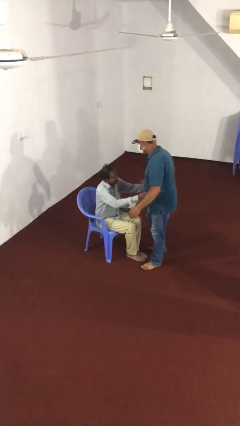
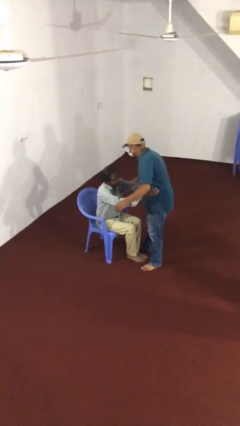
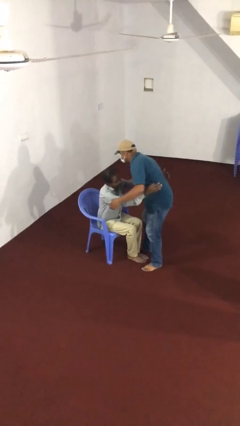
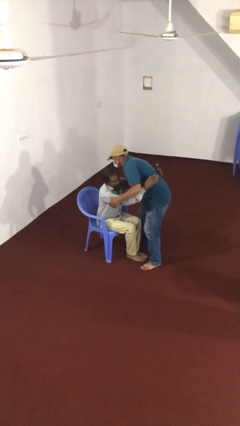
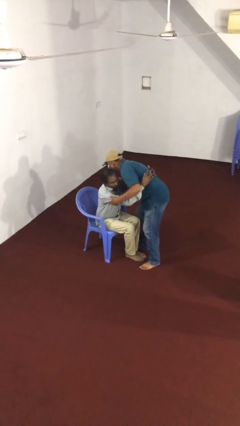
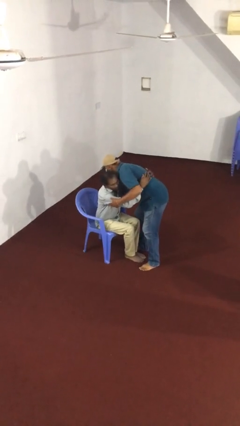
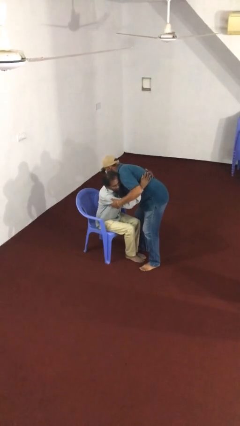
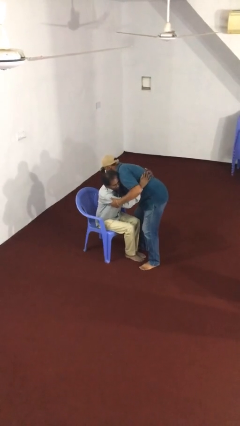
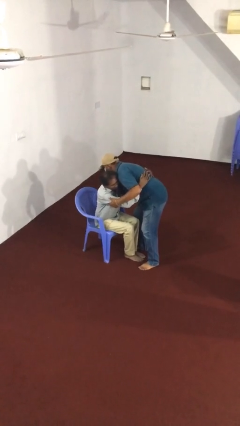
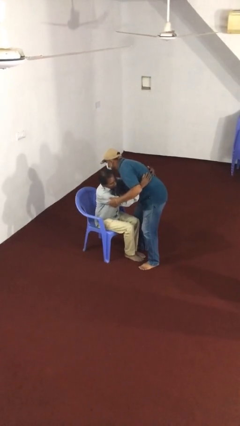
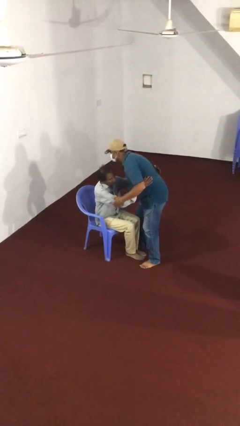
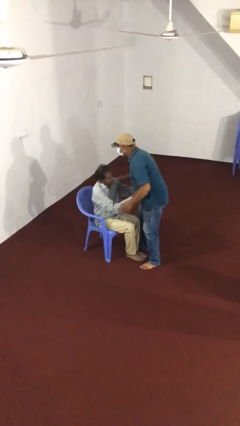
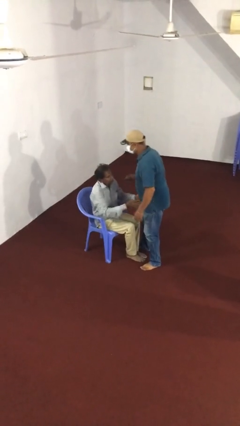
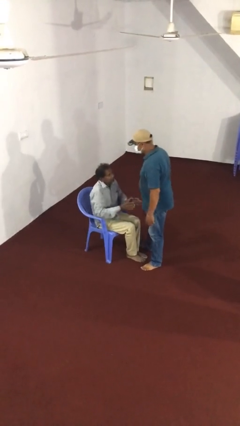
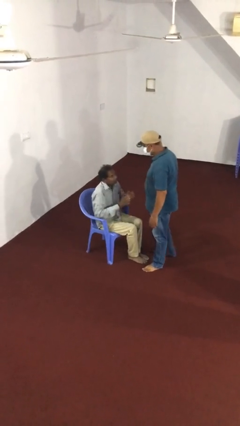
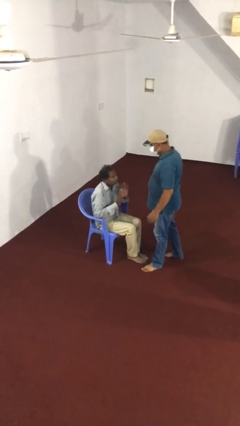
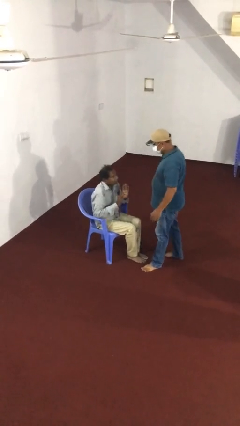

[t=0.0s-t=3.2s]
person embraces person

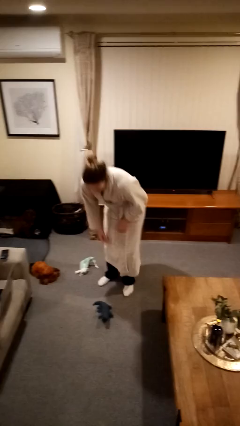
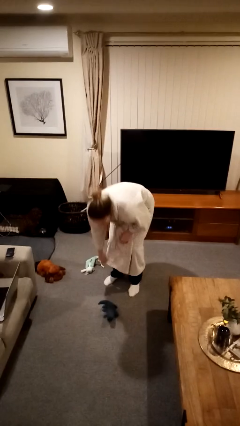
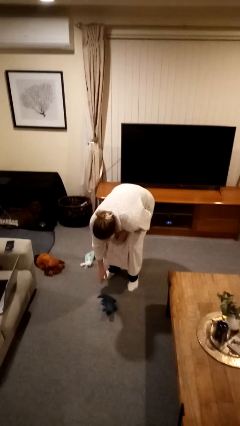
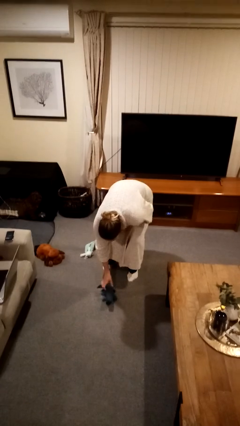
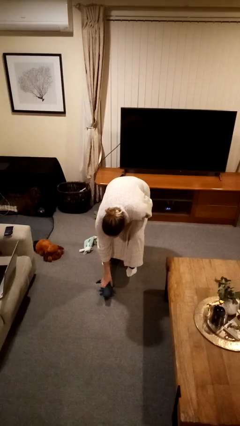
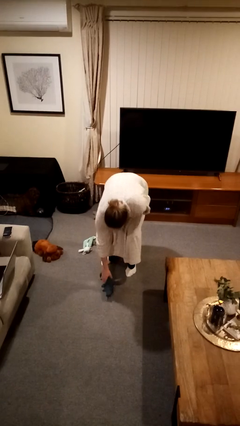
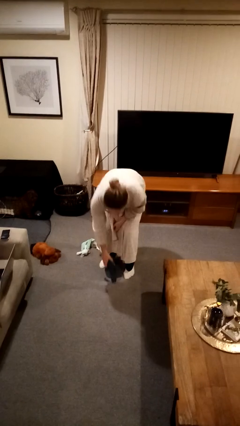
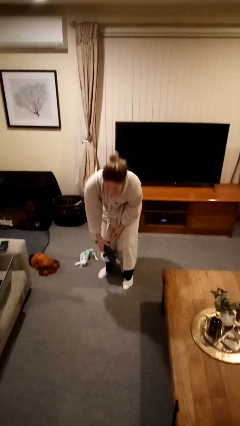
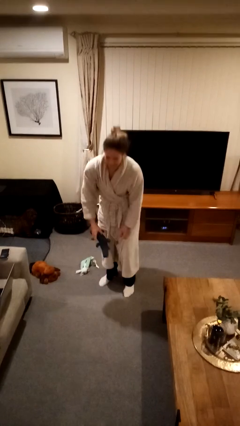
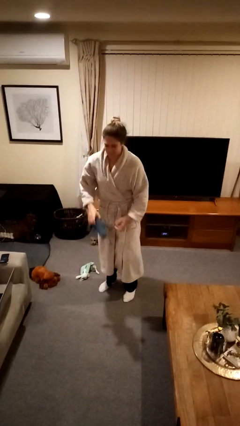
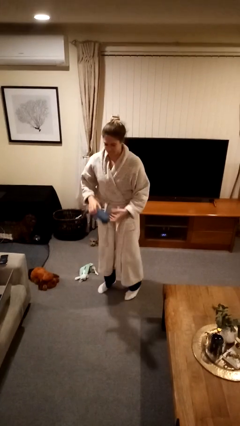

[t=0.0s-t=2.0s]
person picks up object from floor

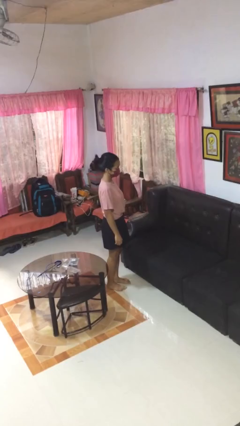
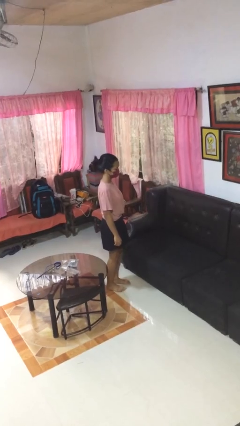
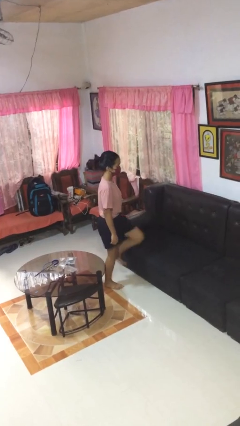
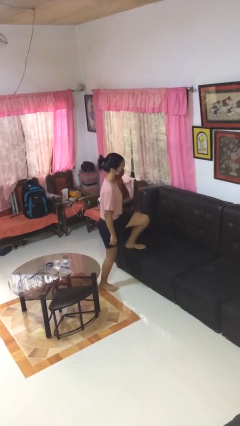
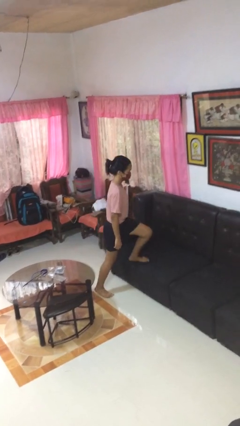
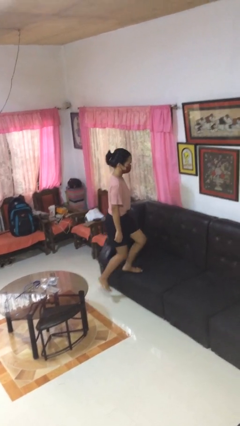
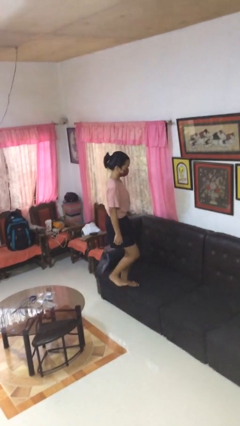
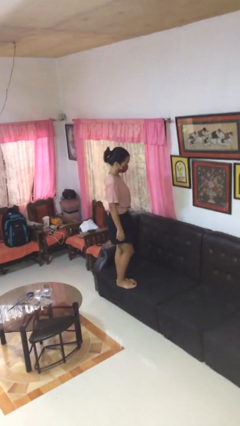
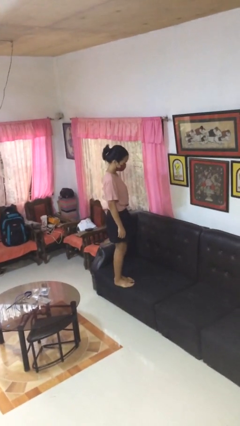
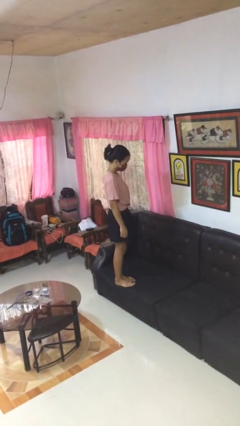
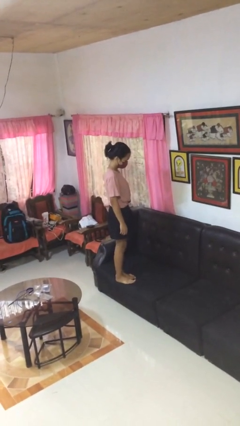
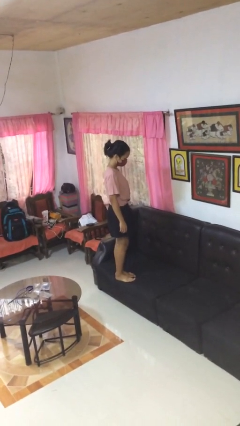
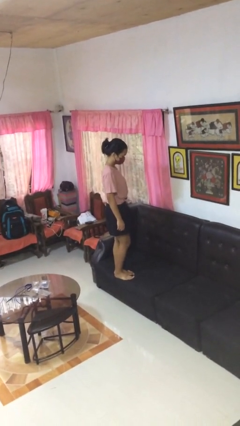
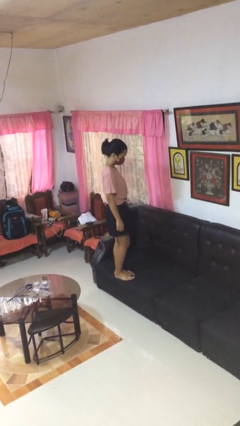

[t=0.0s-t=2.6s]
person climbs on couch

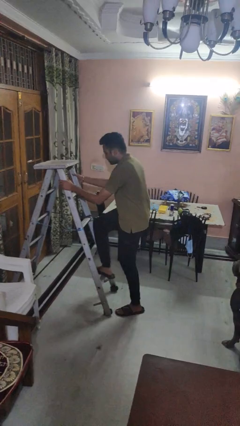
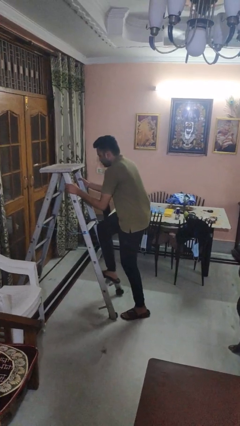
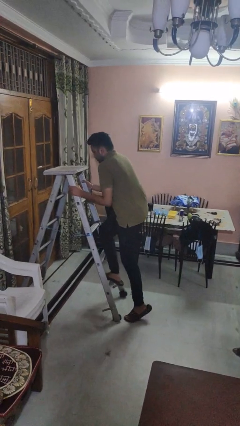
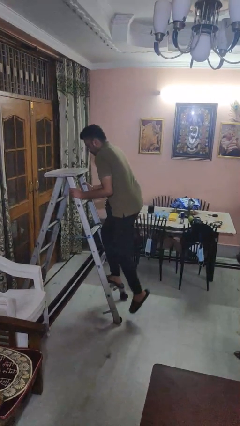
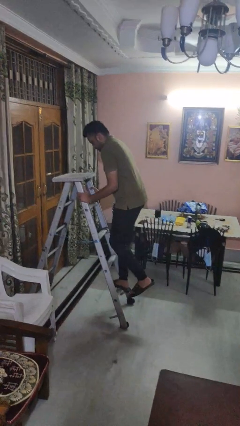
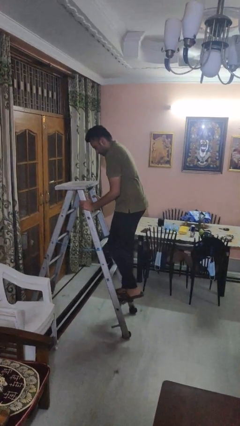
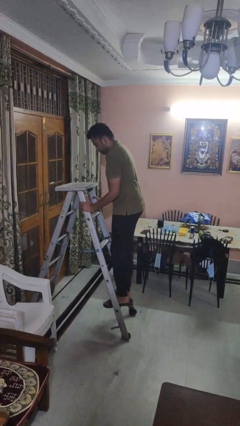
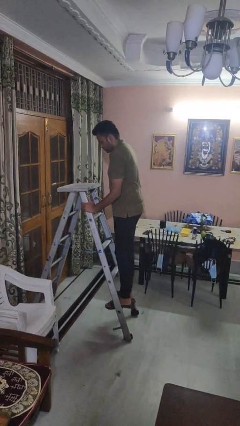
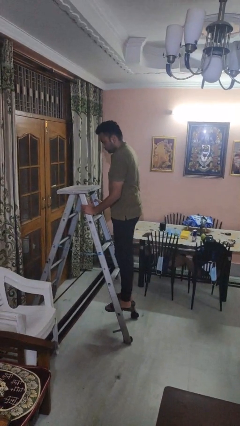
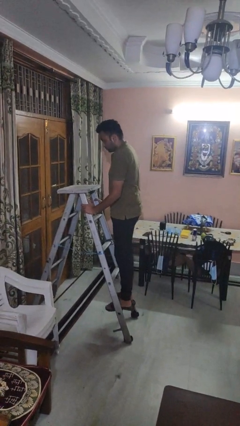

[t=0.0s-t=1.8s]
person climbs up ladder

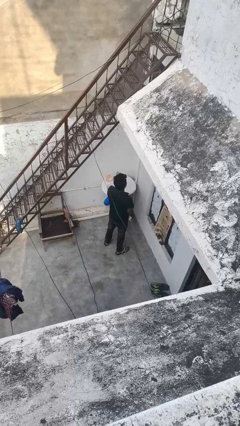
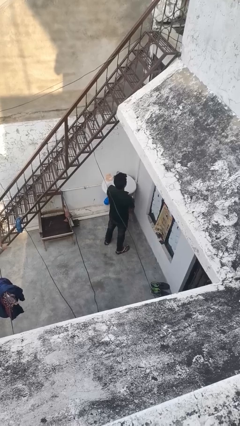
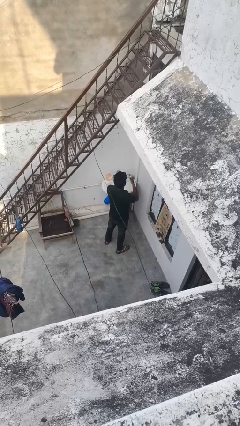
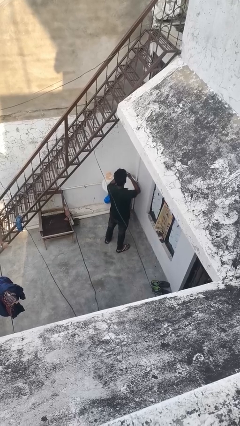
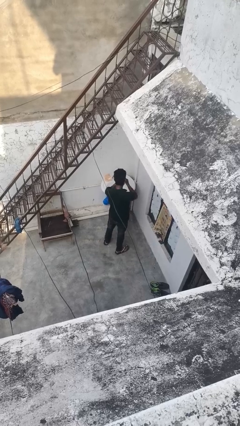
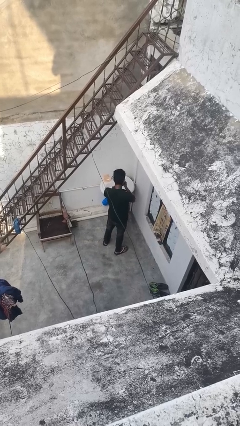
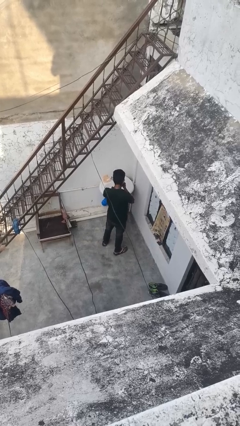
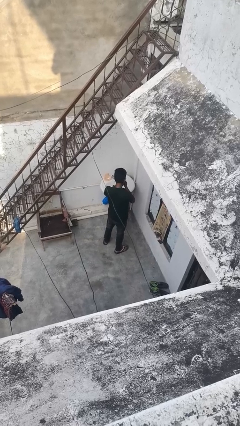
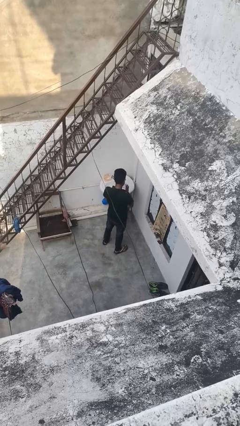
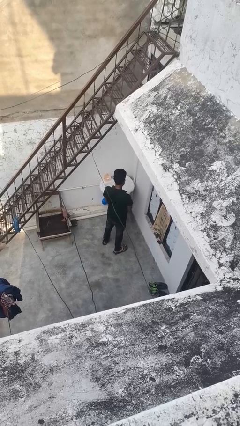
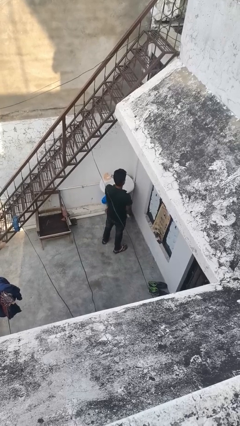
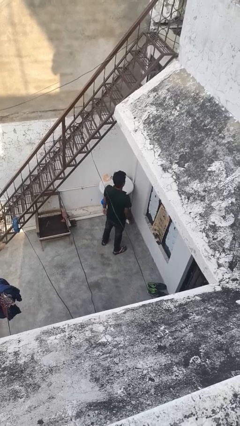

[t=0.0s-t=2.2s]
person blows nose

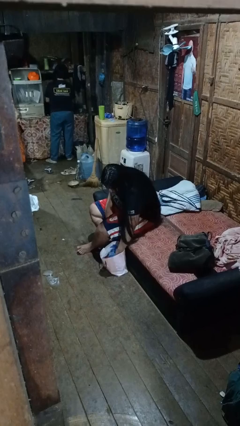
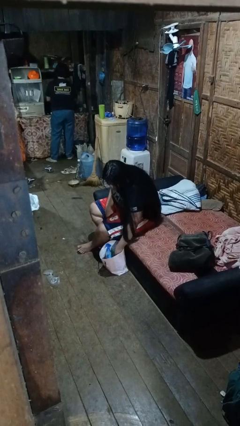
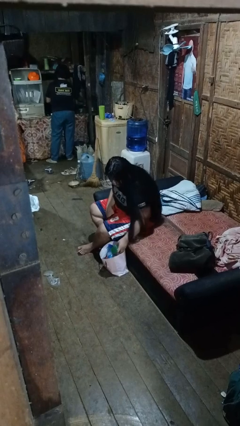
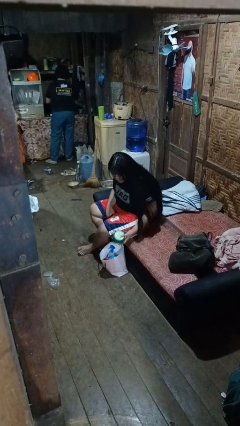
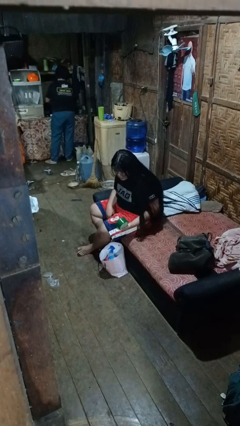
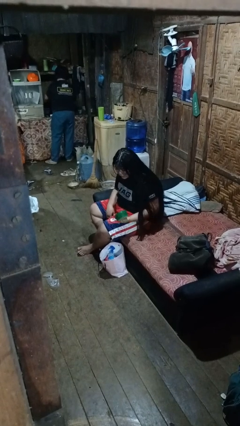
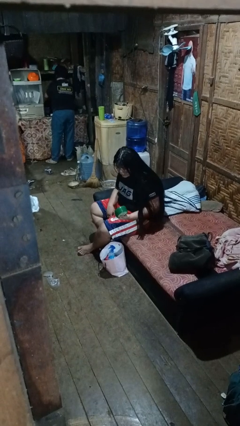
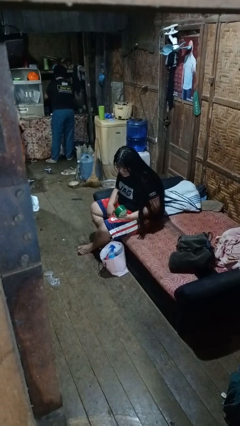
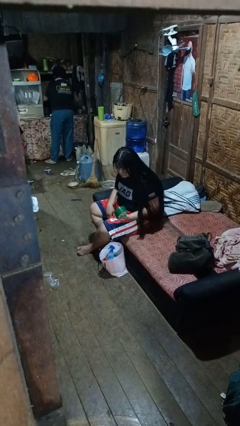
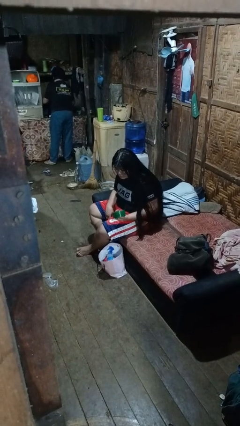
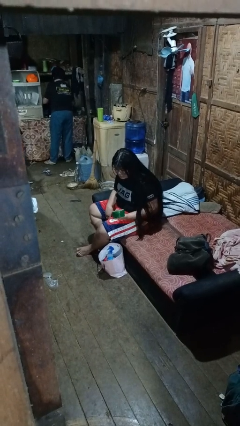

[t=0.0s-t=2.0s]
person takes object from bag

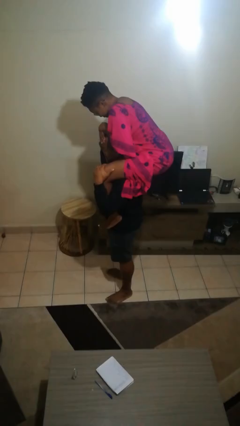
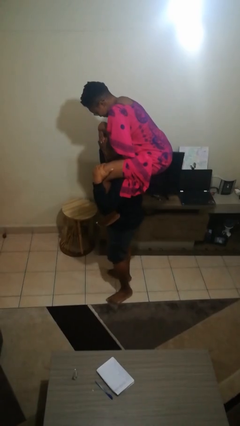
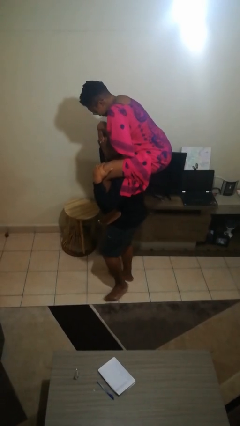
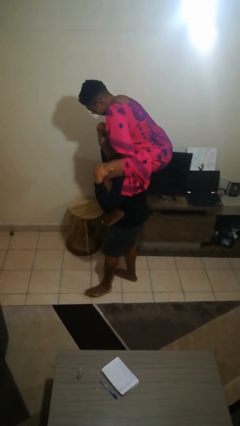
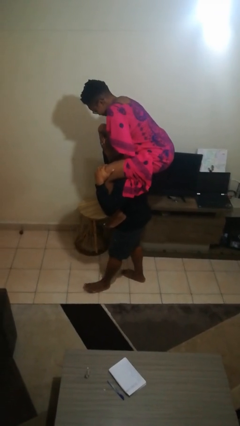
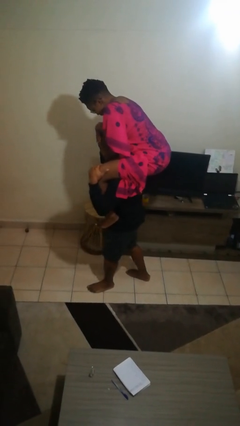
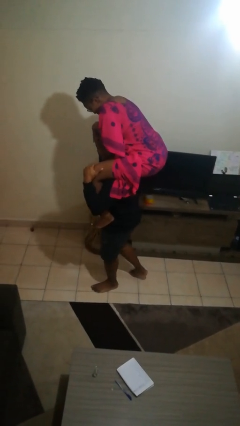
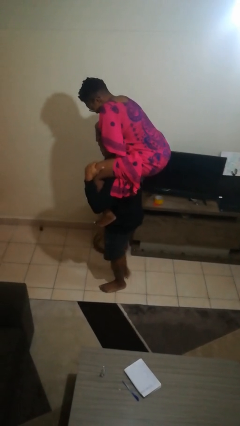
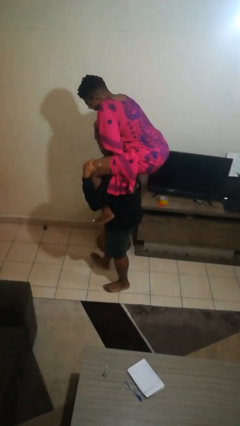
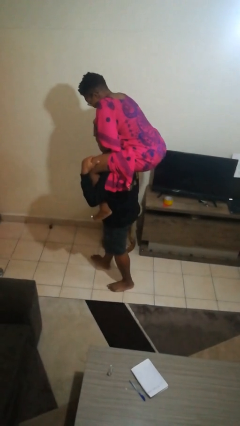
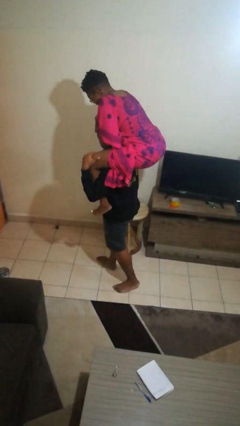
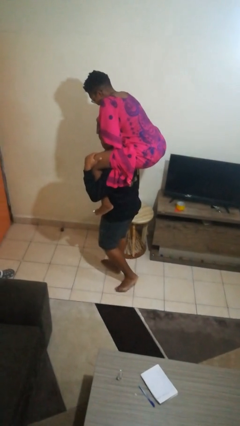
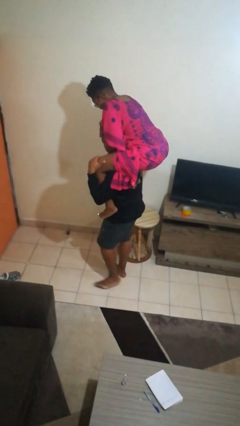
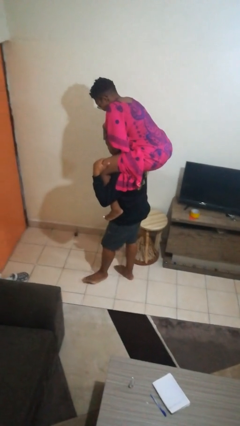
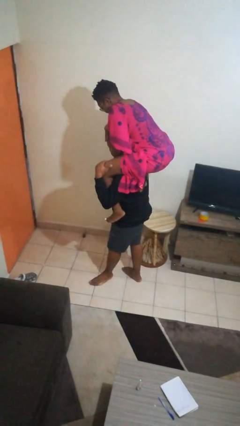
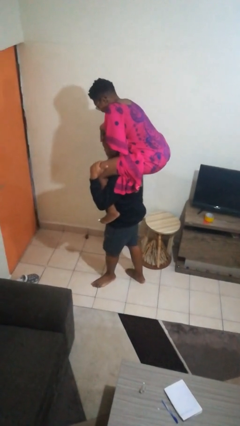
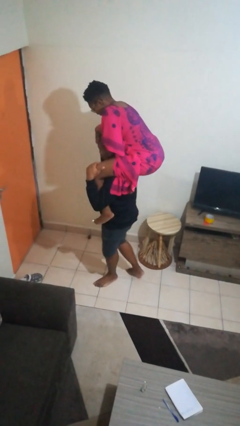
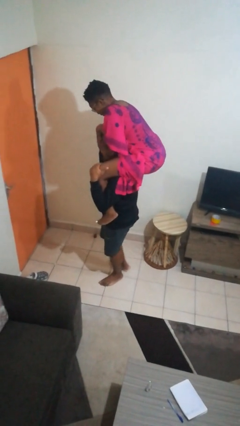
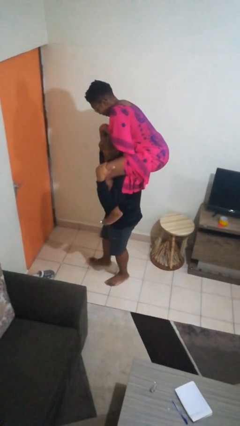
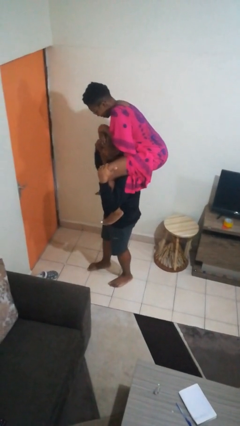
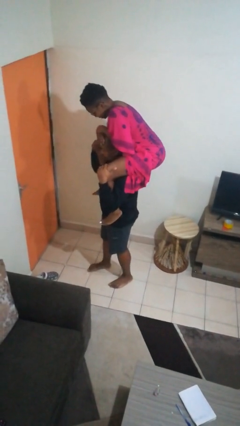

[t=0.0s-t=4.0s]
person carries person on shoulders
